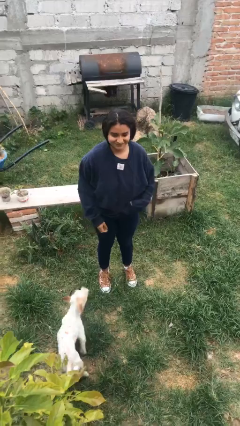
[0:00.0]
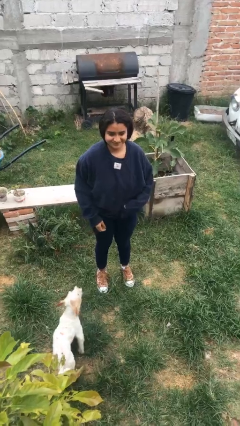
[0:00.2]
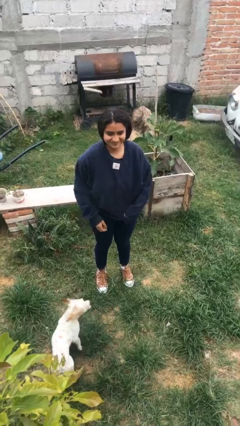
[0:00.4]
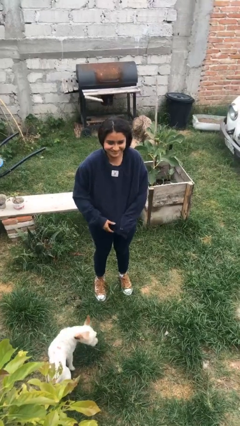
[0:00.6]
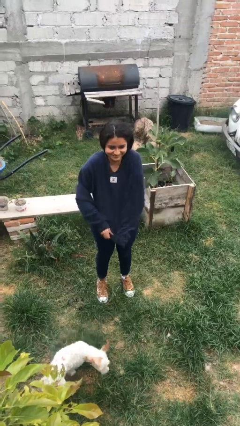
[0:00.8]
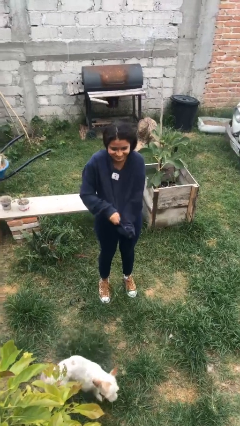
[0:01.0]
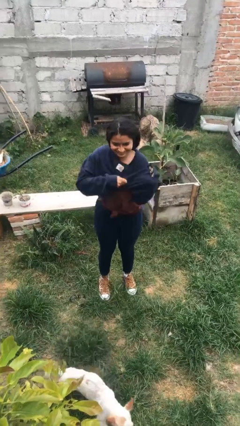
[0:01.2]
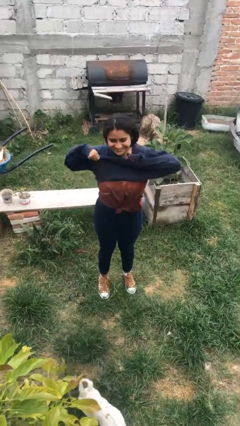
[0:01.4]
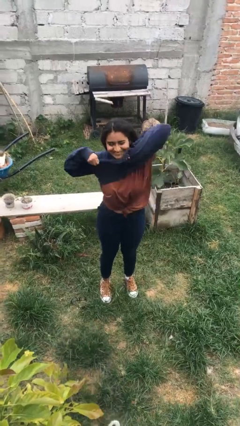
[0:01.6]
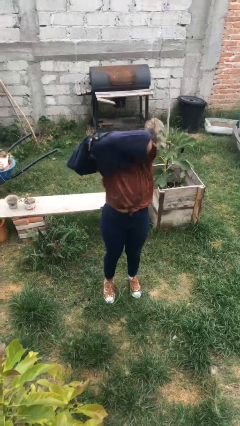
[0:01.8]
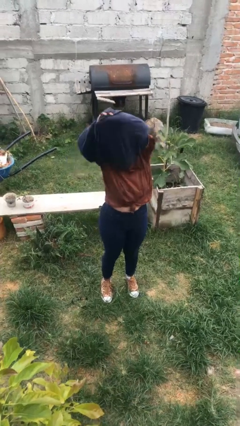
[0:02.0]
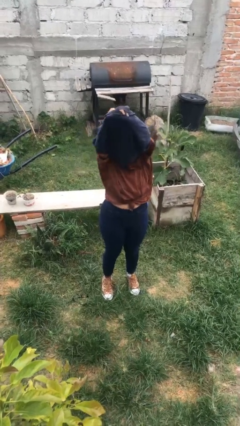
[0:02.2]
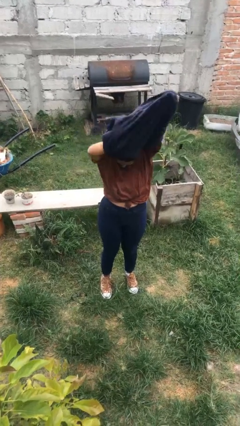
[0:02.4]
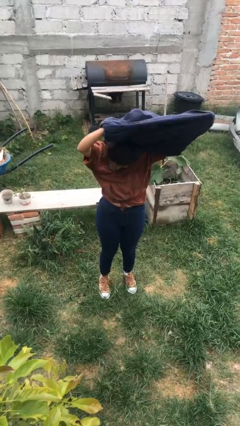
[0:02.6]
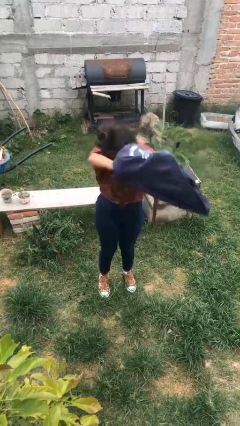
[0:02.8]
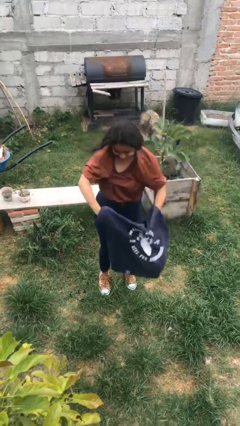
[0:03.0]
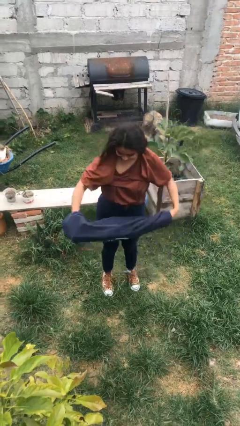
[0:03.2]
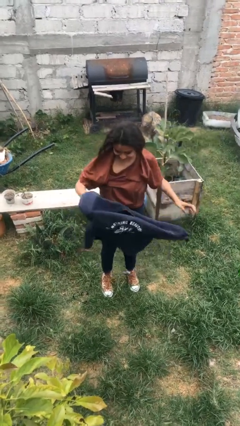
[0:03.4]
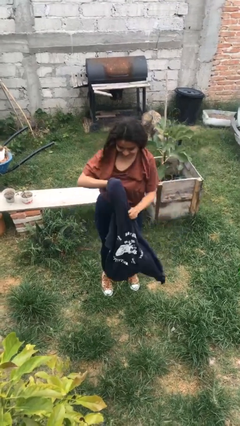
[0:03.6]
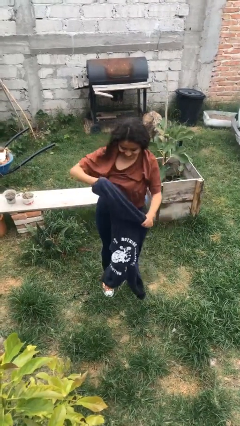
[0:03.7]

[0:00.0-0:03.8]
person takes off shirt

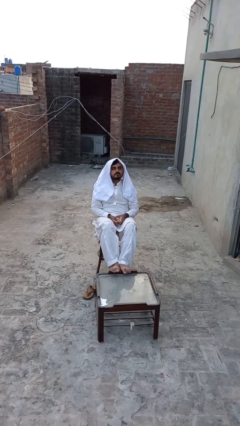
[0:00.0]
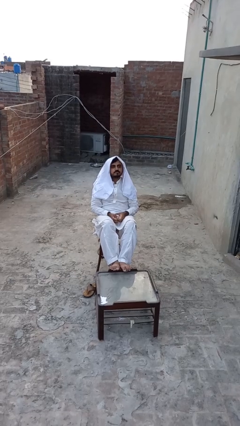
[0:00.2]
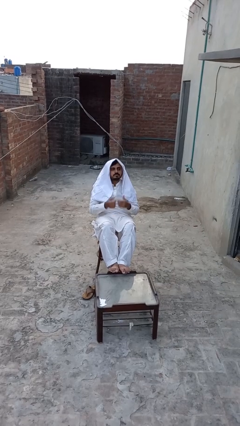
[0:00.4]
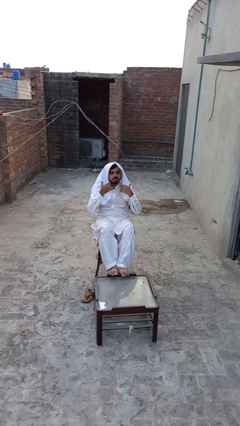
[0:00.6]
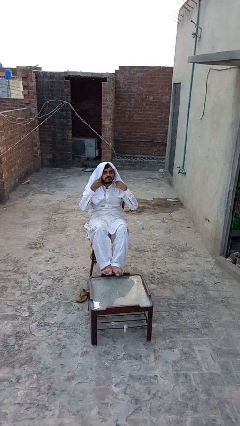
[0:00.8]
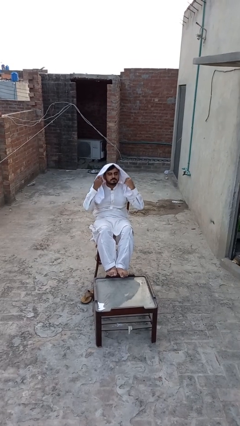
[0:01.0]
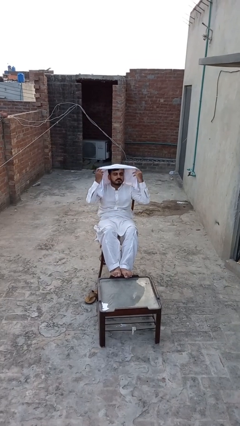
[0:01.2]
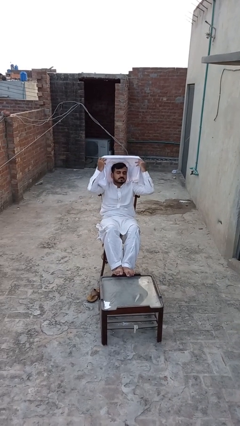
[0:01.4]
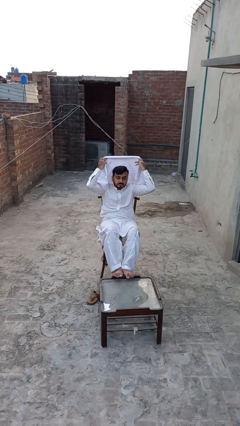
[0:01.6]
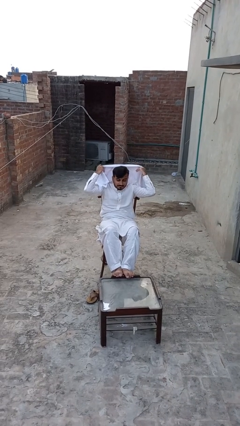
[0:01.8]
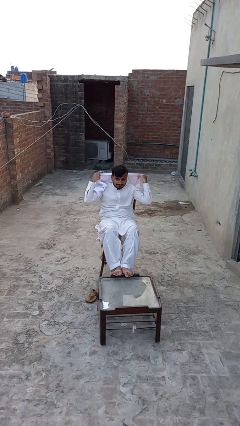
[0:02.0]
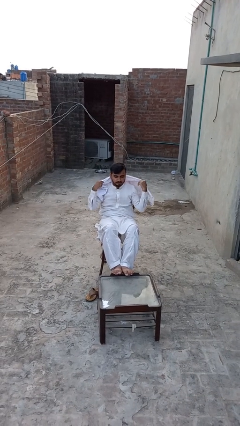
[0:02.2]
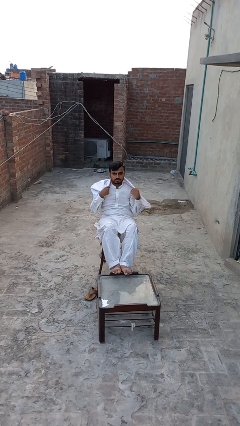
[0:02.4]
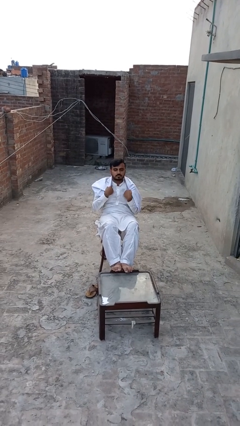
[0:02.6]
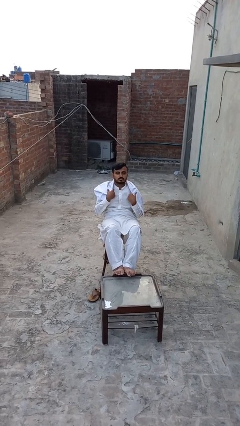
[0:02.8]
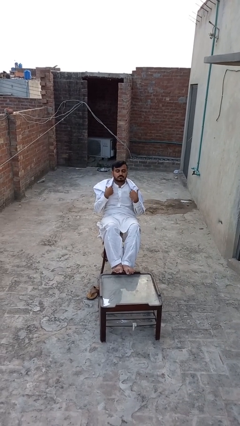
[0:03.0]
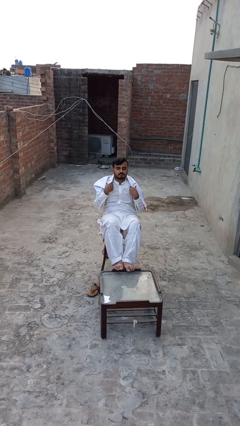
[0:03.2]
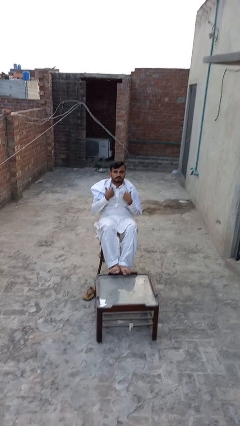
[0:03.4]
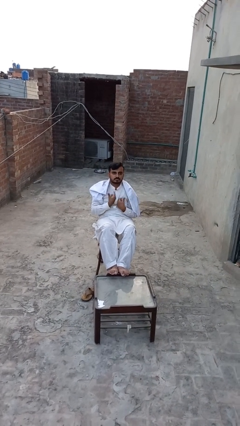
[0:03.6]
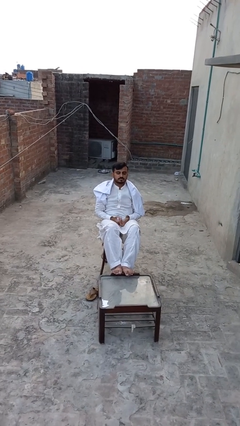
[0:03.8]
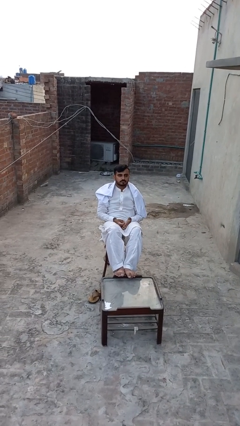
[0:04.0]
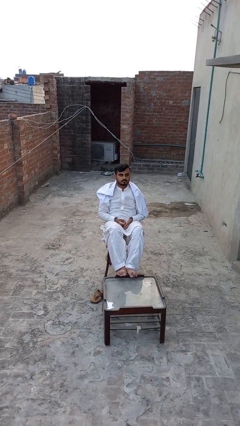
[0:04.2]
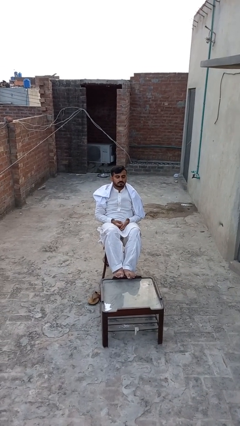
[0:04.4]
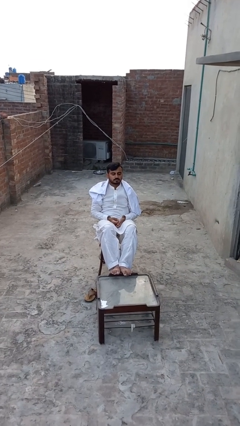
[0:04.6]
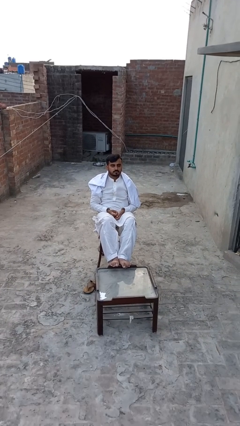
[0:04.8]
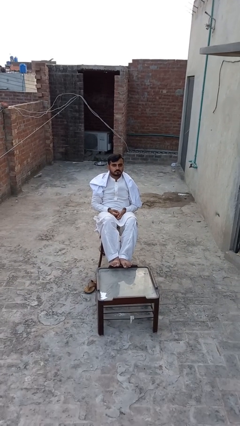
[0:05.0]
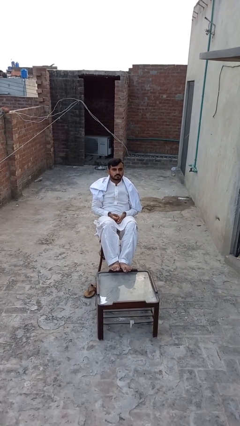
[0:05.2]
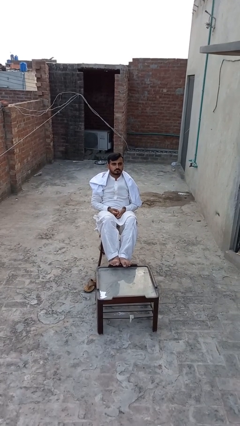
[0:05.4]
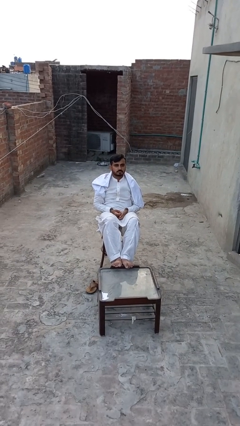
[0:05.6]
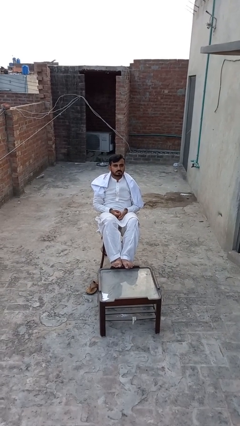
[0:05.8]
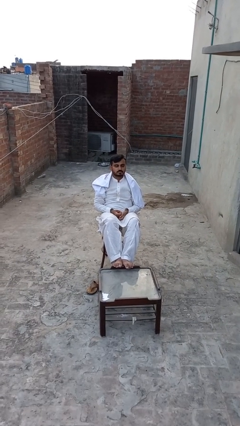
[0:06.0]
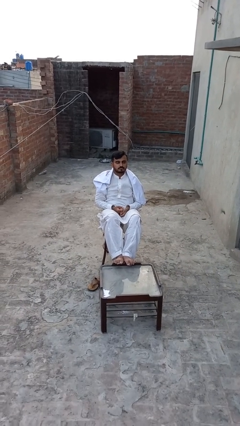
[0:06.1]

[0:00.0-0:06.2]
person takes off scarf

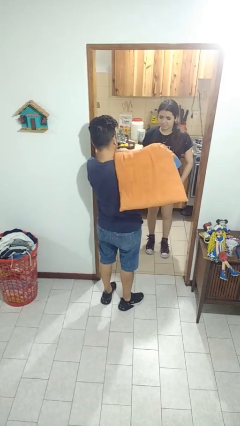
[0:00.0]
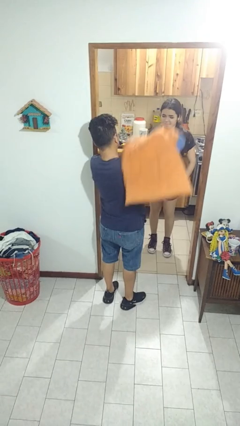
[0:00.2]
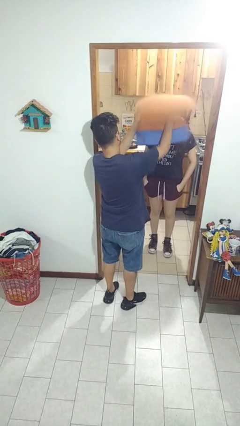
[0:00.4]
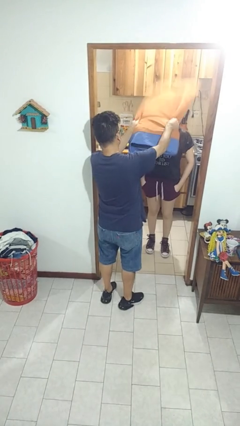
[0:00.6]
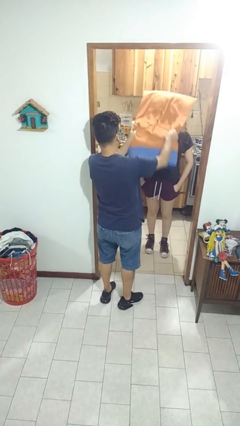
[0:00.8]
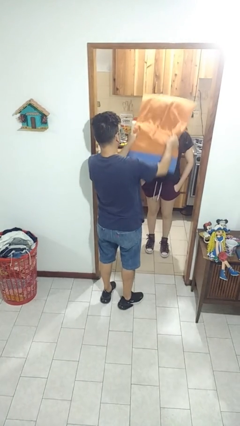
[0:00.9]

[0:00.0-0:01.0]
person hits person with pillow

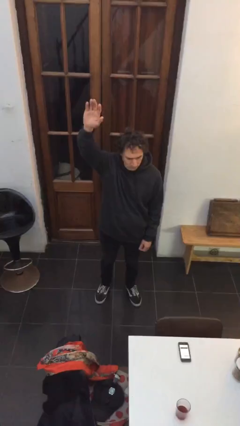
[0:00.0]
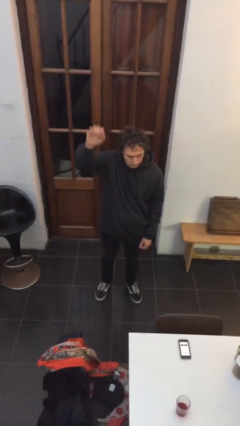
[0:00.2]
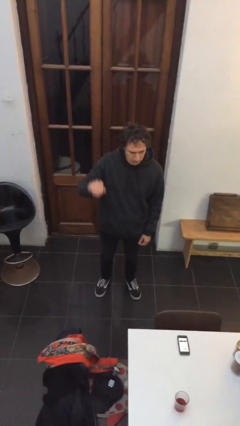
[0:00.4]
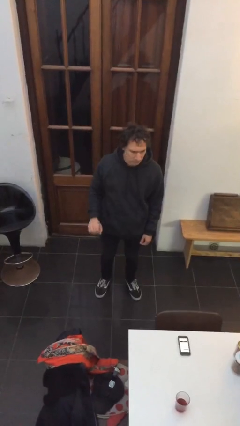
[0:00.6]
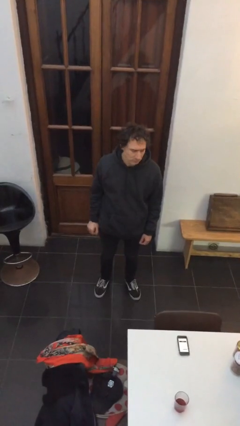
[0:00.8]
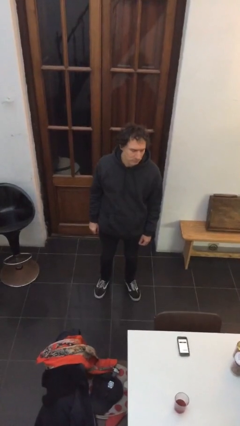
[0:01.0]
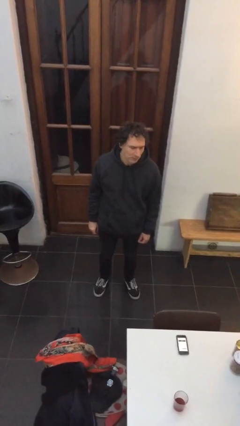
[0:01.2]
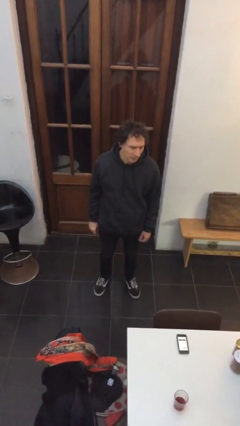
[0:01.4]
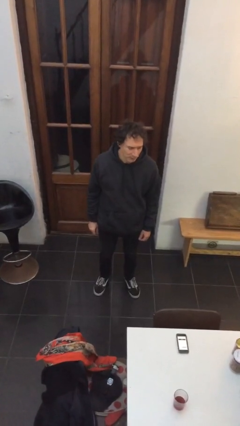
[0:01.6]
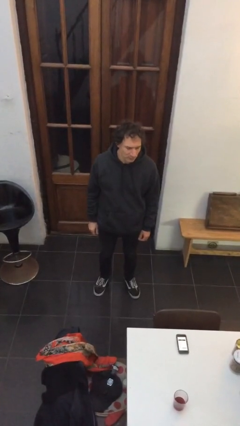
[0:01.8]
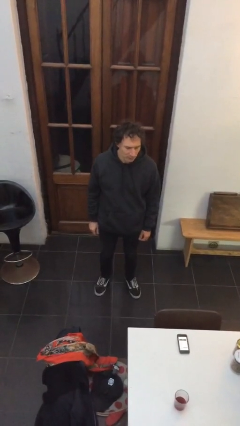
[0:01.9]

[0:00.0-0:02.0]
person gestures lower hand

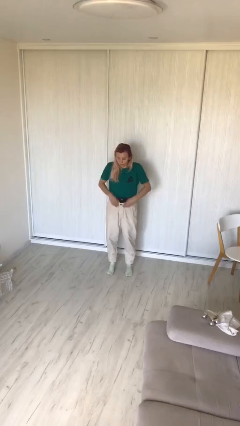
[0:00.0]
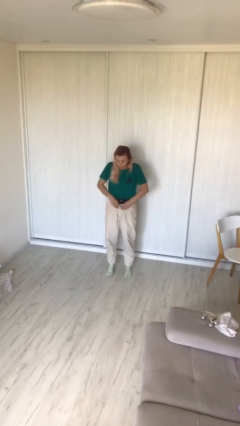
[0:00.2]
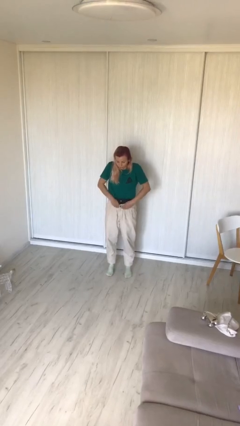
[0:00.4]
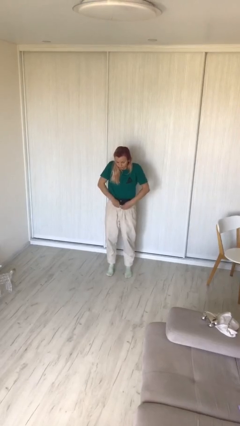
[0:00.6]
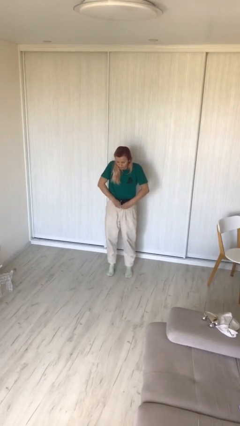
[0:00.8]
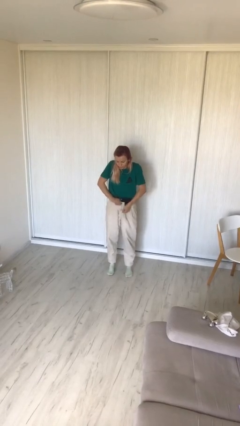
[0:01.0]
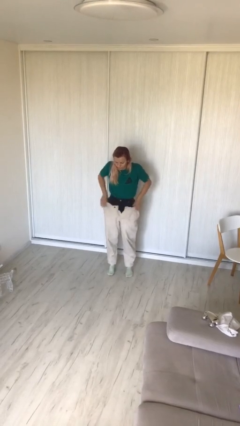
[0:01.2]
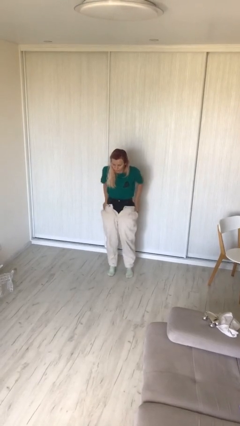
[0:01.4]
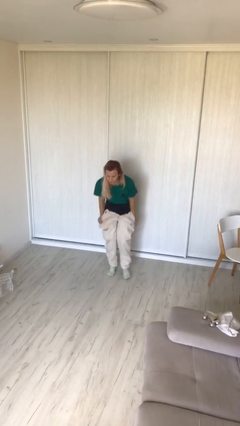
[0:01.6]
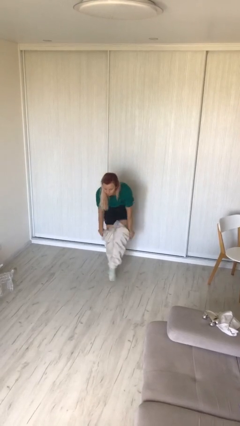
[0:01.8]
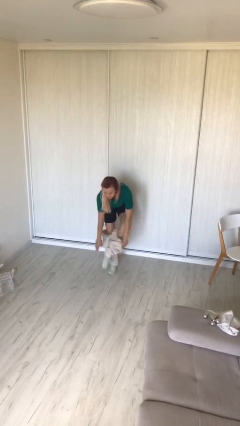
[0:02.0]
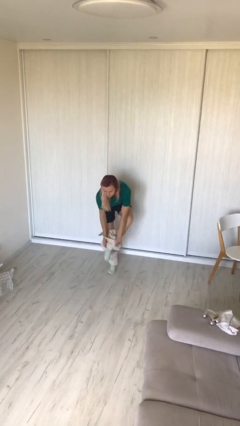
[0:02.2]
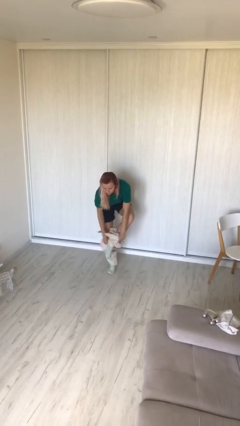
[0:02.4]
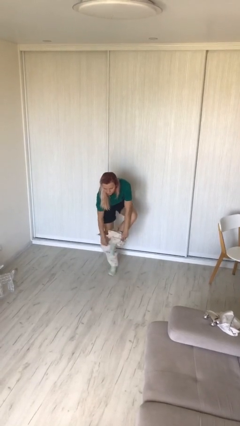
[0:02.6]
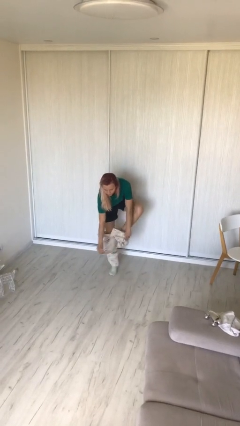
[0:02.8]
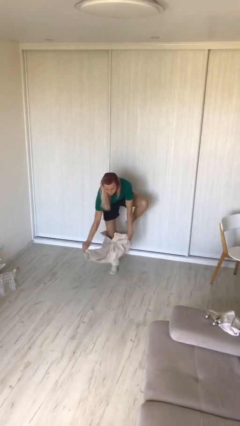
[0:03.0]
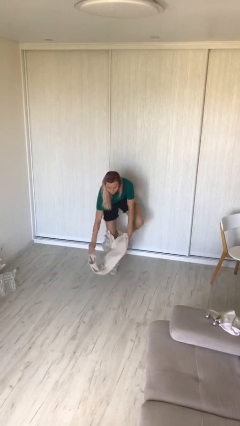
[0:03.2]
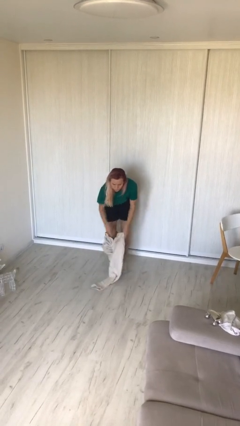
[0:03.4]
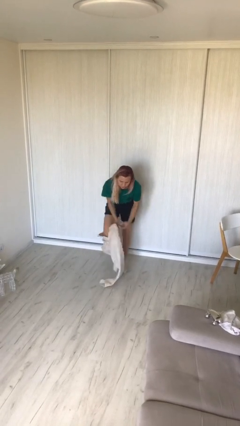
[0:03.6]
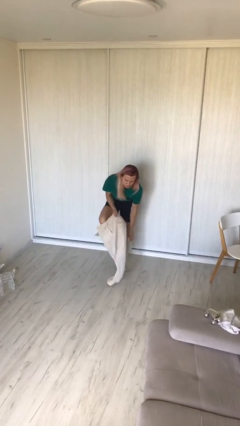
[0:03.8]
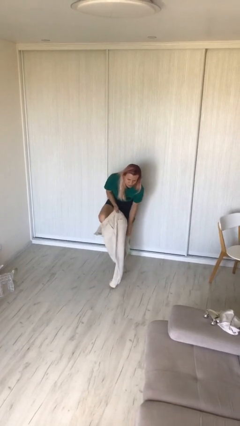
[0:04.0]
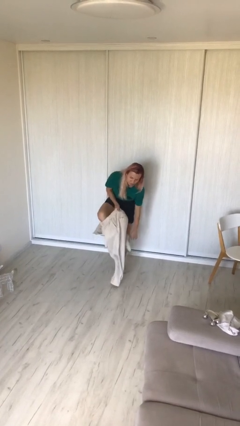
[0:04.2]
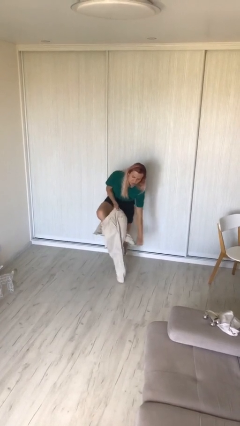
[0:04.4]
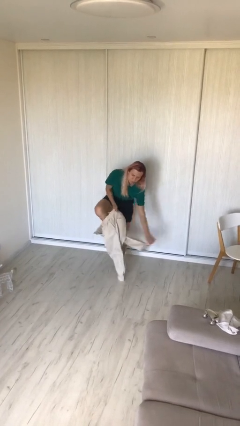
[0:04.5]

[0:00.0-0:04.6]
person takes off pants
